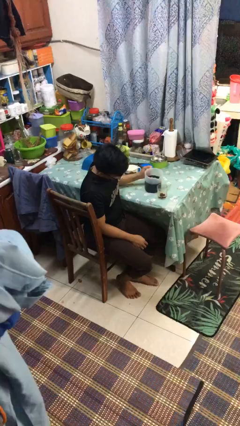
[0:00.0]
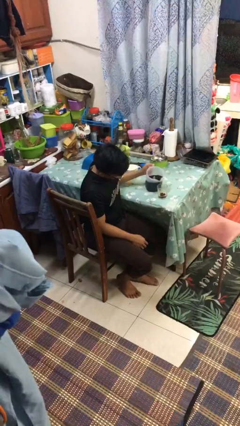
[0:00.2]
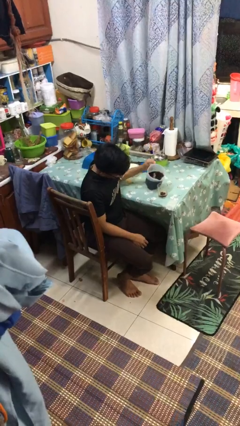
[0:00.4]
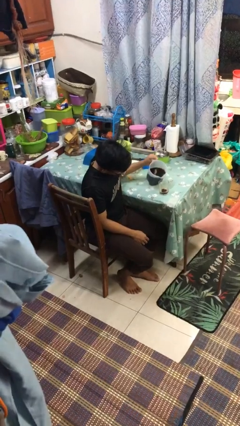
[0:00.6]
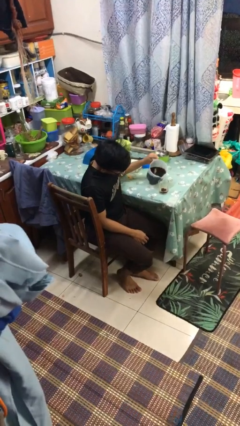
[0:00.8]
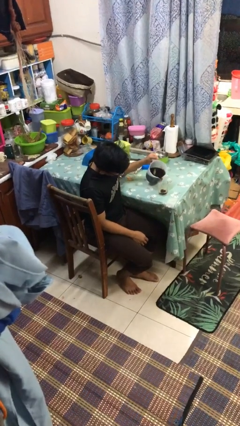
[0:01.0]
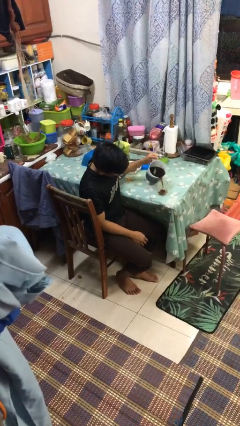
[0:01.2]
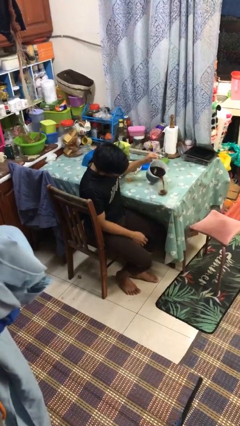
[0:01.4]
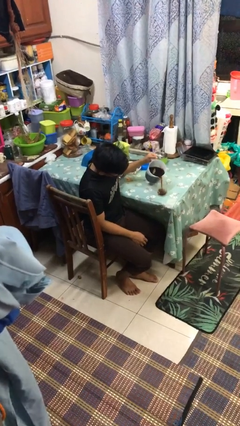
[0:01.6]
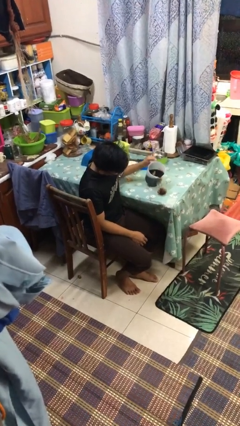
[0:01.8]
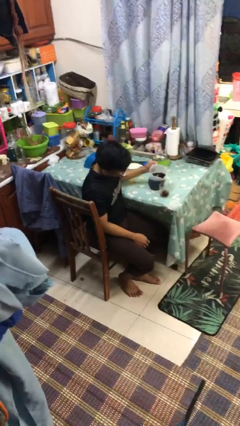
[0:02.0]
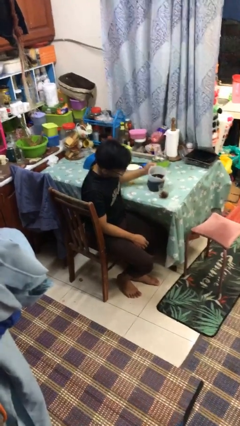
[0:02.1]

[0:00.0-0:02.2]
person pours coffee into mug

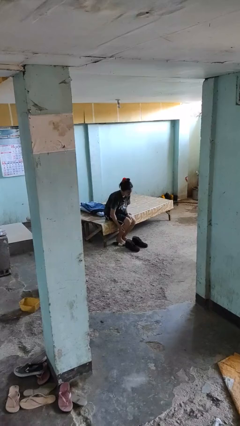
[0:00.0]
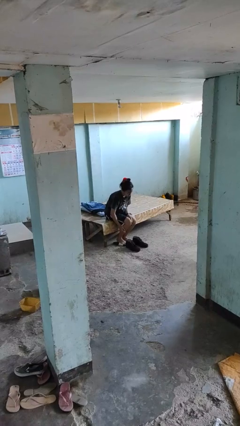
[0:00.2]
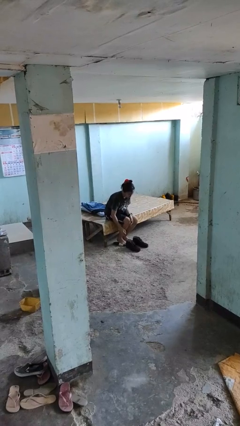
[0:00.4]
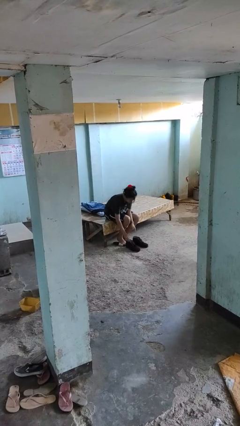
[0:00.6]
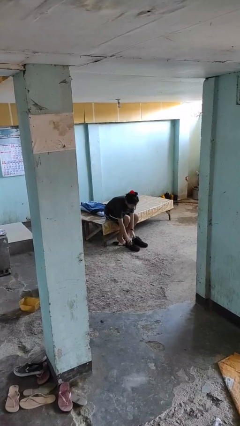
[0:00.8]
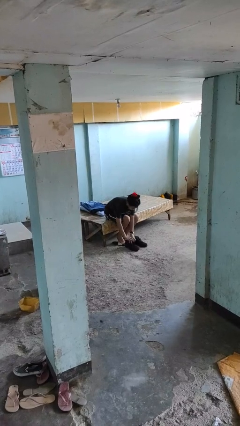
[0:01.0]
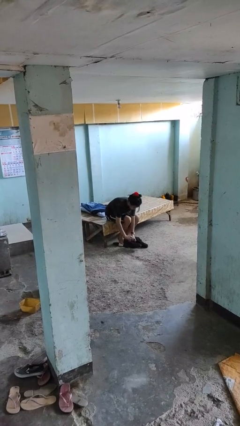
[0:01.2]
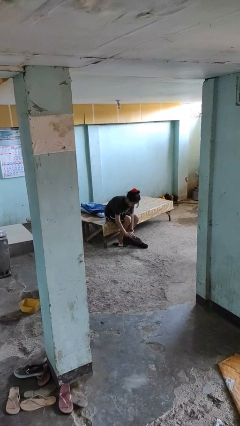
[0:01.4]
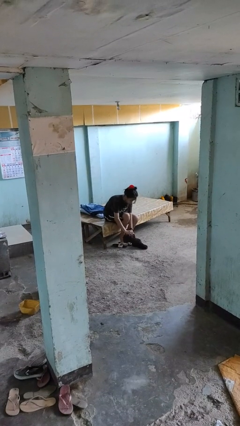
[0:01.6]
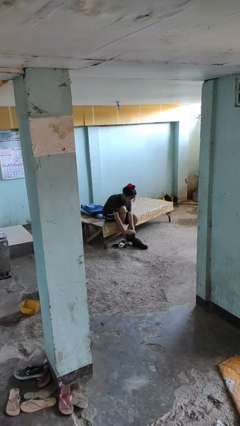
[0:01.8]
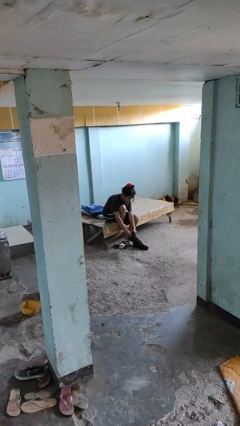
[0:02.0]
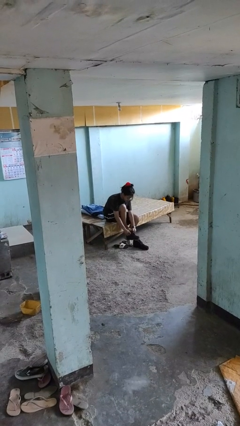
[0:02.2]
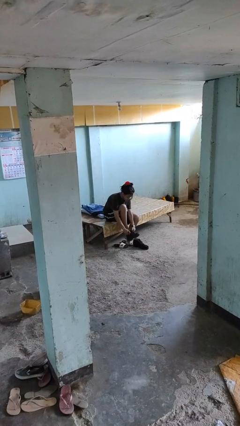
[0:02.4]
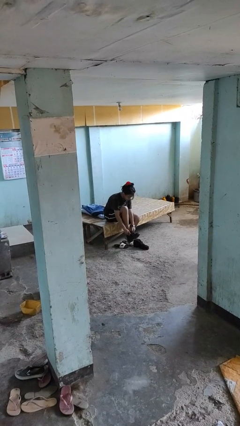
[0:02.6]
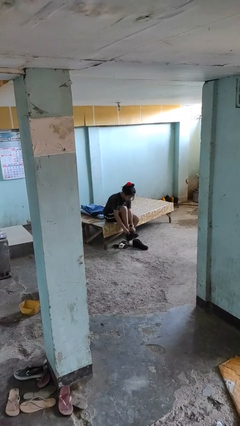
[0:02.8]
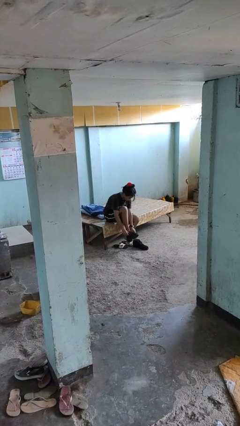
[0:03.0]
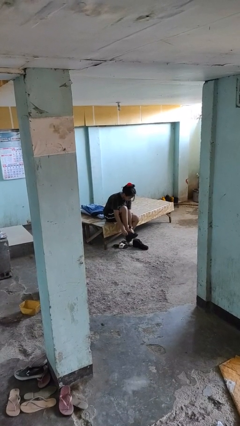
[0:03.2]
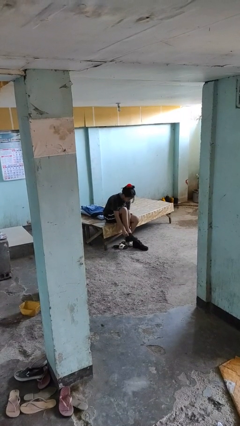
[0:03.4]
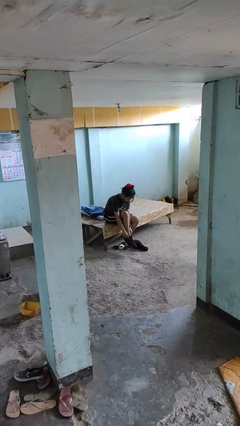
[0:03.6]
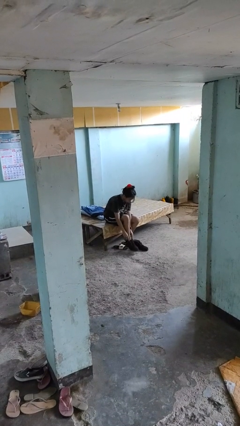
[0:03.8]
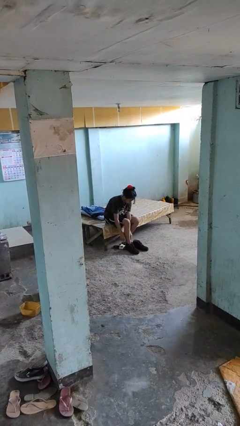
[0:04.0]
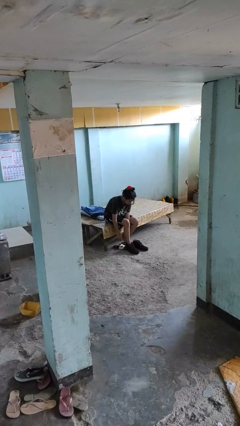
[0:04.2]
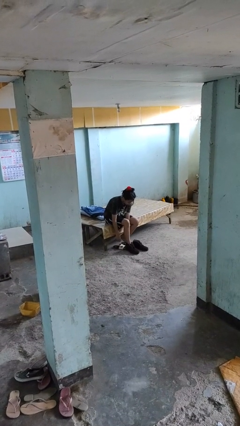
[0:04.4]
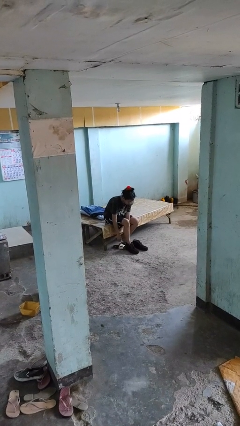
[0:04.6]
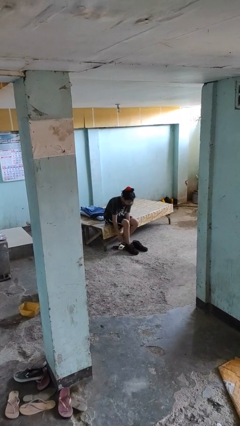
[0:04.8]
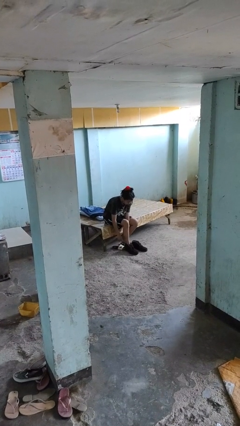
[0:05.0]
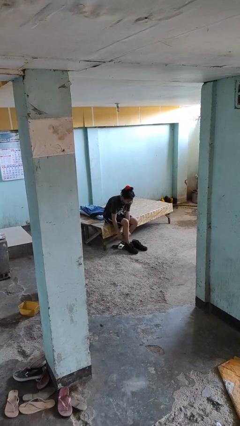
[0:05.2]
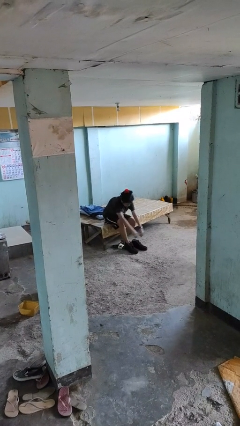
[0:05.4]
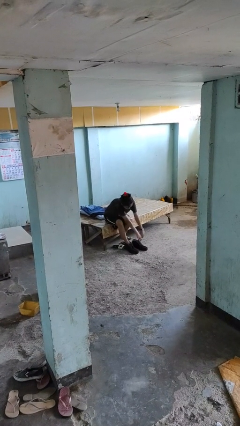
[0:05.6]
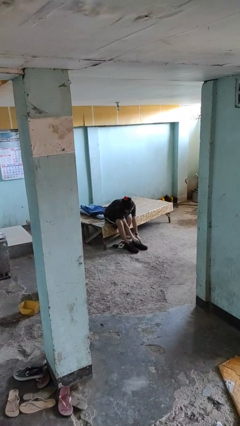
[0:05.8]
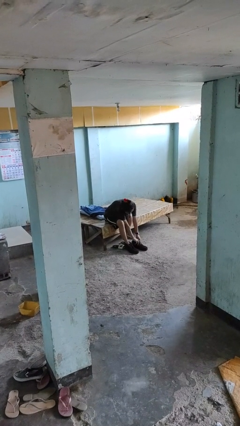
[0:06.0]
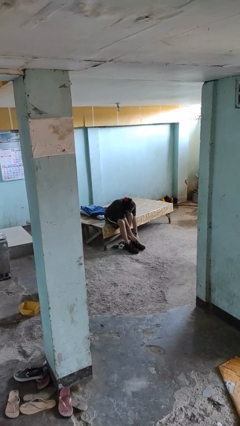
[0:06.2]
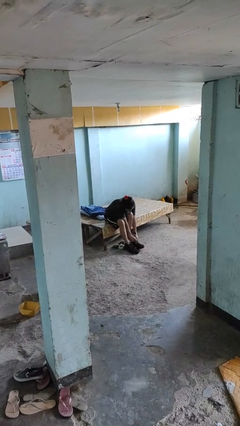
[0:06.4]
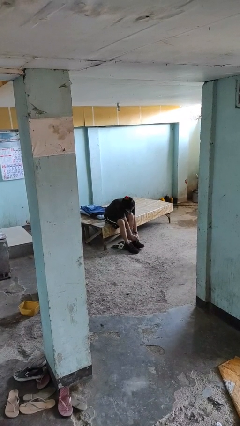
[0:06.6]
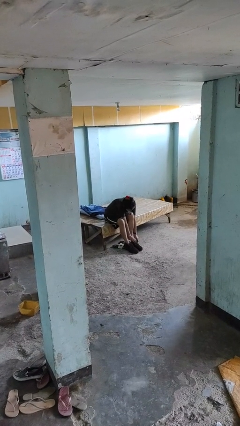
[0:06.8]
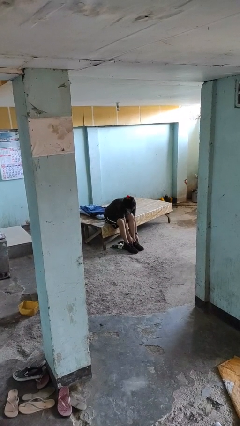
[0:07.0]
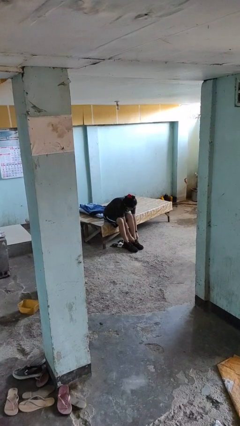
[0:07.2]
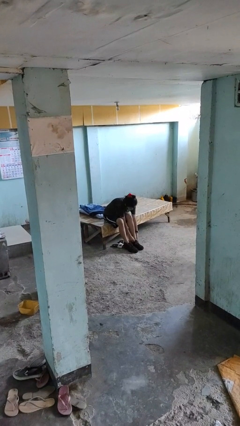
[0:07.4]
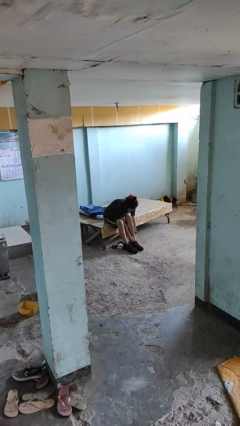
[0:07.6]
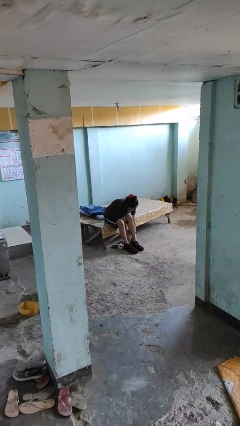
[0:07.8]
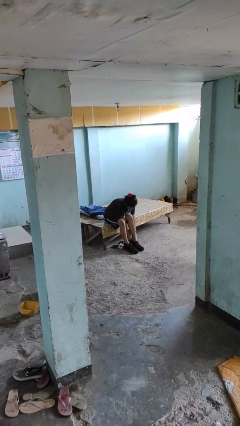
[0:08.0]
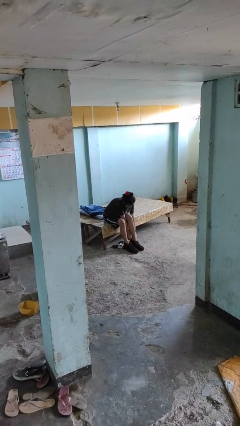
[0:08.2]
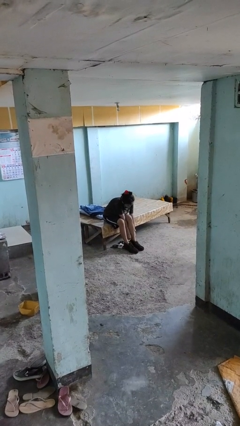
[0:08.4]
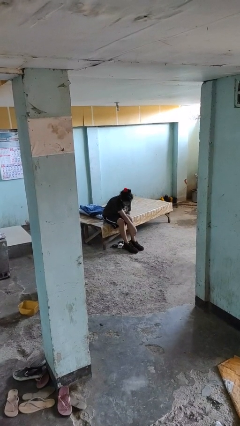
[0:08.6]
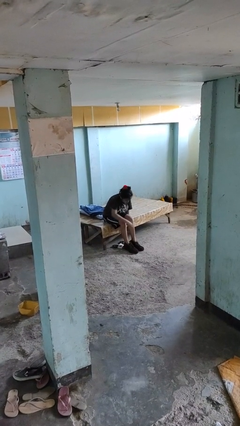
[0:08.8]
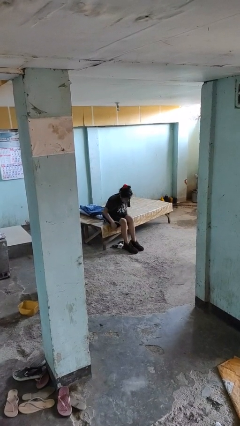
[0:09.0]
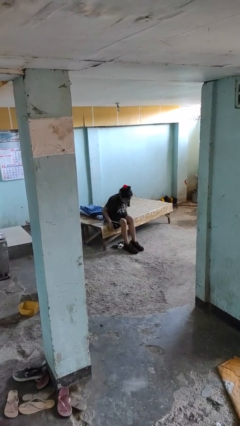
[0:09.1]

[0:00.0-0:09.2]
person puts on boots

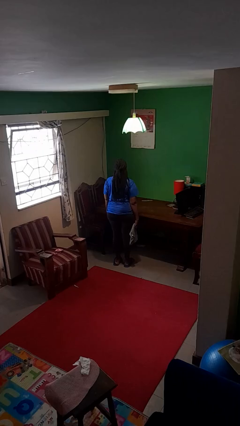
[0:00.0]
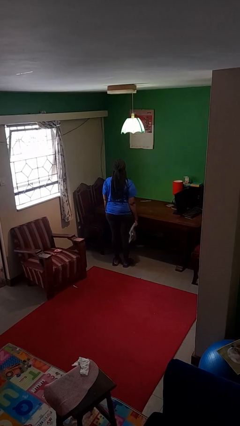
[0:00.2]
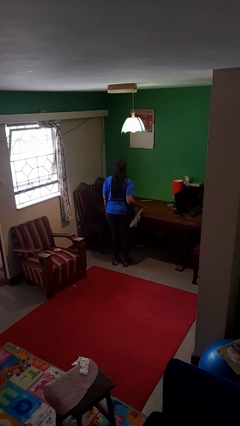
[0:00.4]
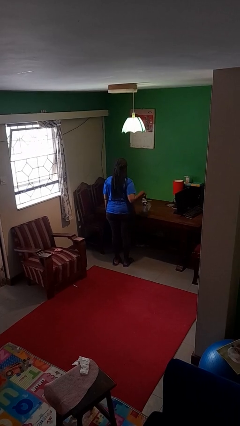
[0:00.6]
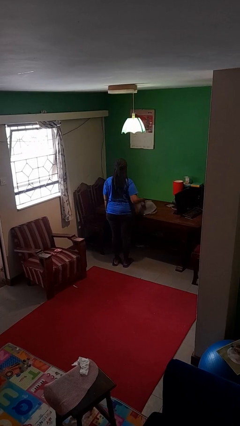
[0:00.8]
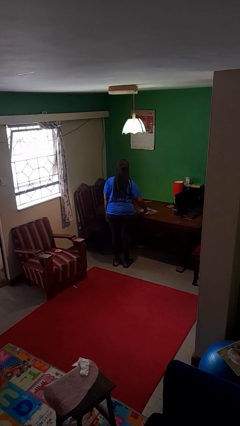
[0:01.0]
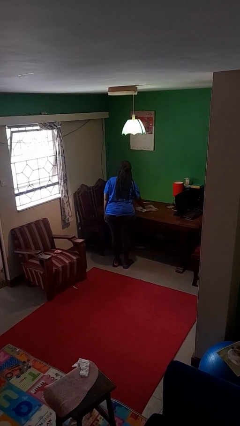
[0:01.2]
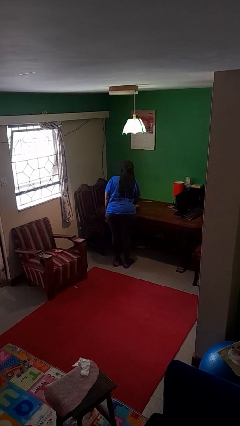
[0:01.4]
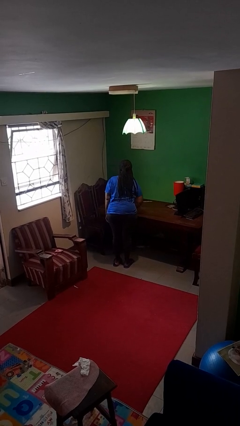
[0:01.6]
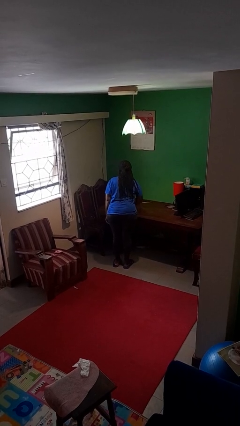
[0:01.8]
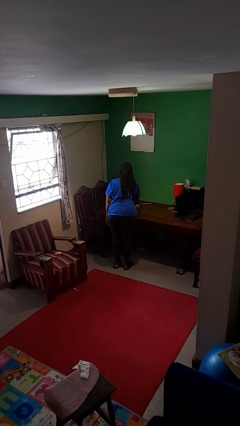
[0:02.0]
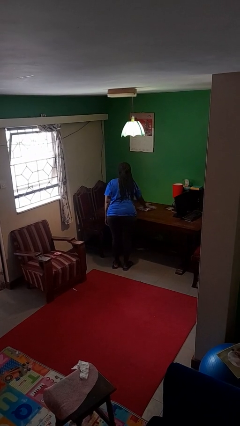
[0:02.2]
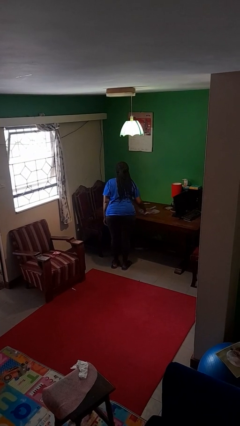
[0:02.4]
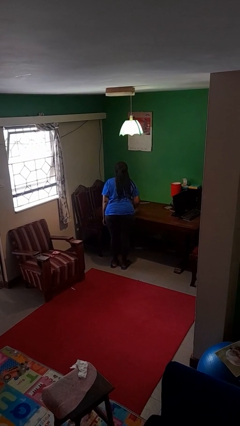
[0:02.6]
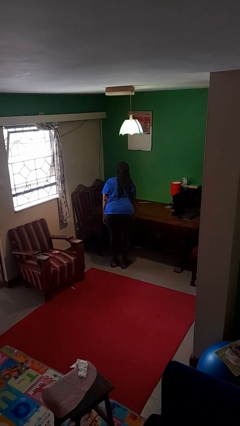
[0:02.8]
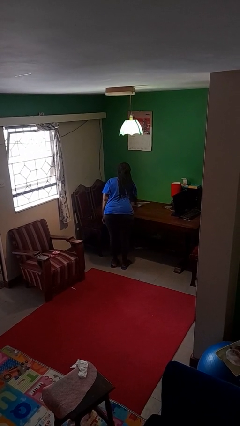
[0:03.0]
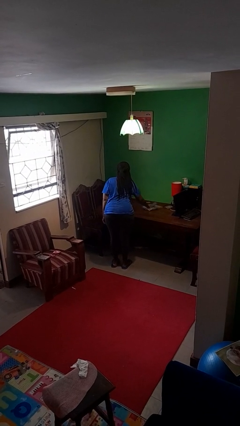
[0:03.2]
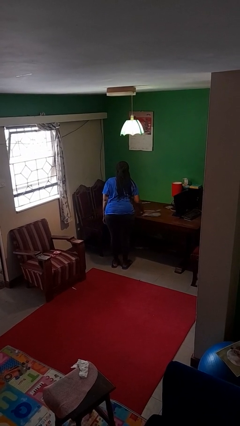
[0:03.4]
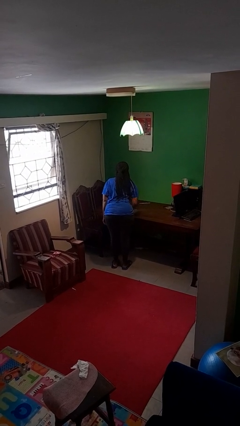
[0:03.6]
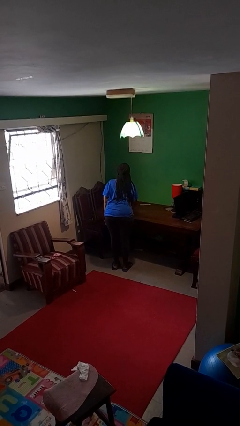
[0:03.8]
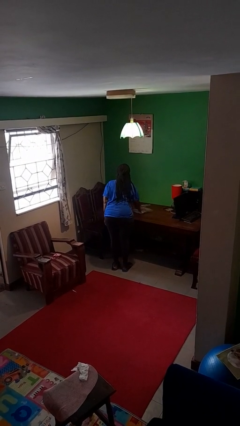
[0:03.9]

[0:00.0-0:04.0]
person cleans table with rag

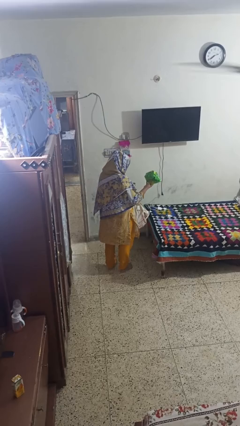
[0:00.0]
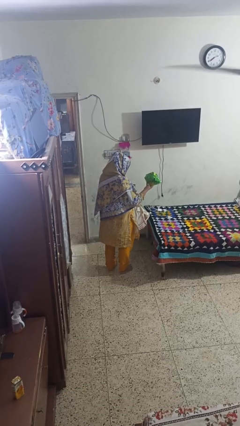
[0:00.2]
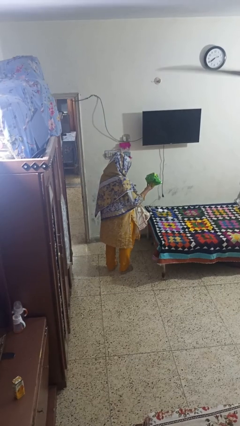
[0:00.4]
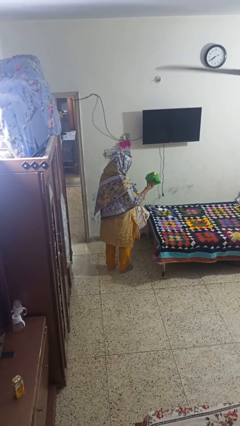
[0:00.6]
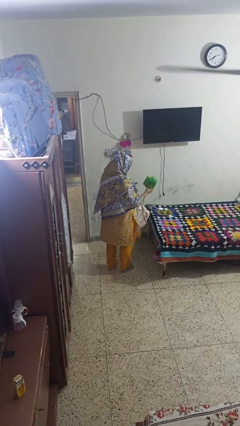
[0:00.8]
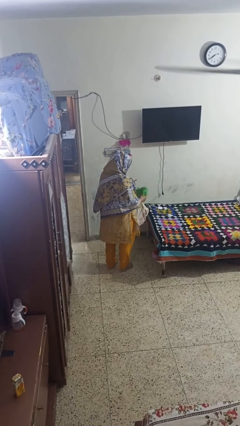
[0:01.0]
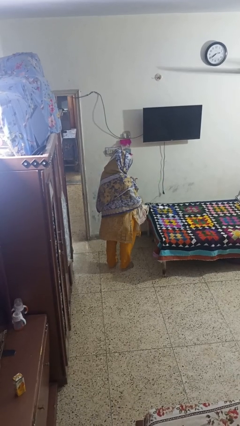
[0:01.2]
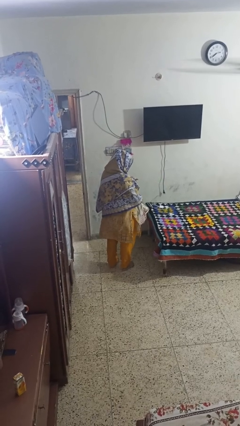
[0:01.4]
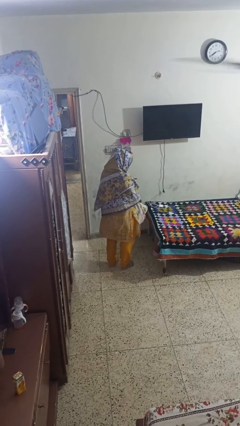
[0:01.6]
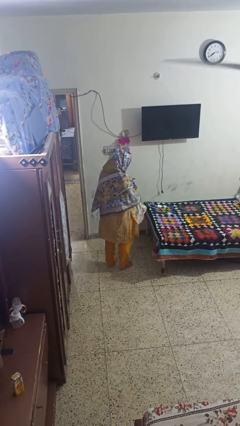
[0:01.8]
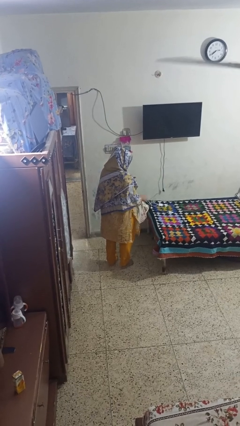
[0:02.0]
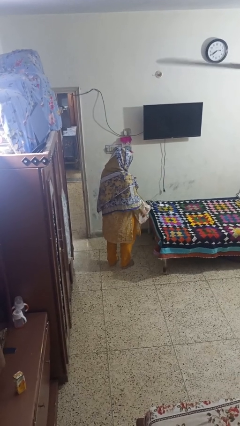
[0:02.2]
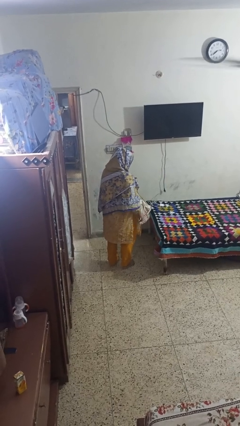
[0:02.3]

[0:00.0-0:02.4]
person puts object into bag
